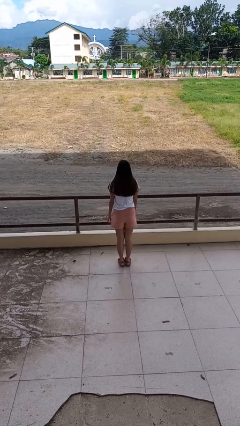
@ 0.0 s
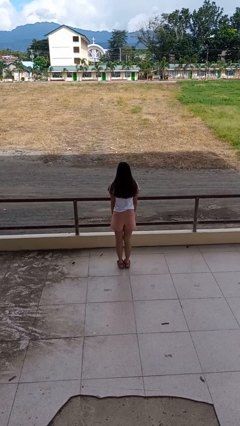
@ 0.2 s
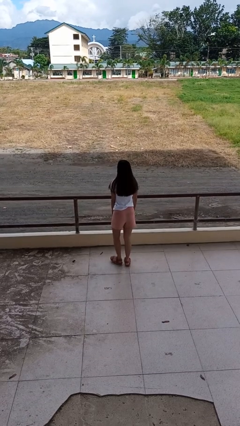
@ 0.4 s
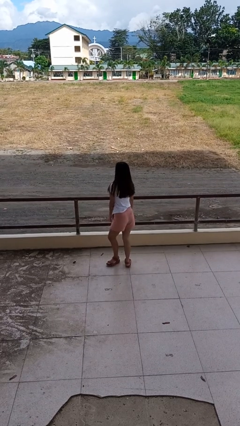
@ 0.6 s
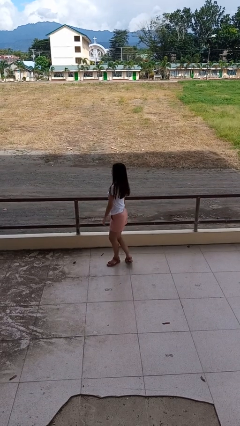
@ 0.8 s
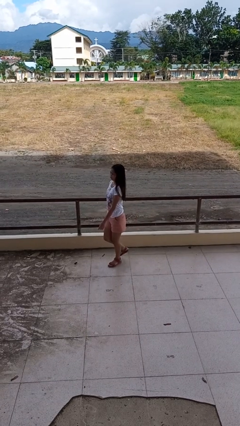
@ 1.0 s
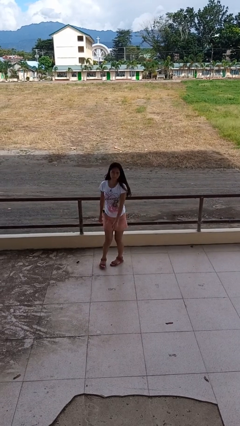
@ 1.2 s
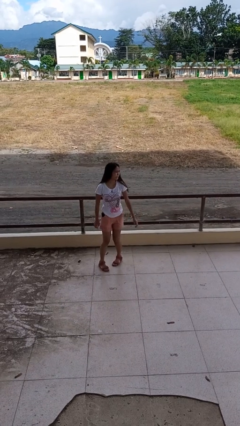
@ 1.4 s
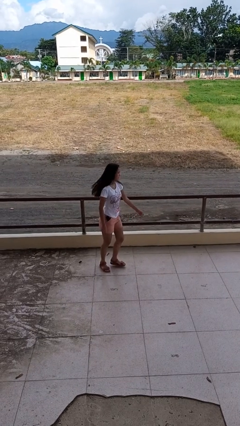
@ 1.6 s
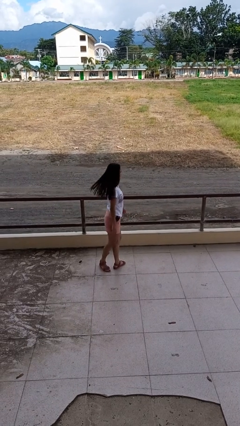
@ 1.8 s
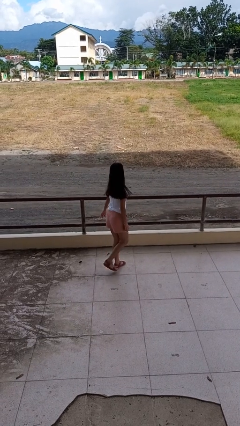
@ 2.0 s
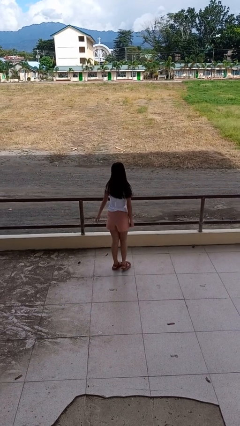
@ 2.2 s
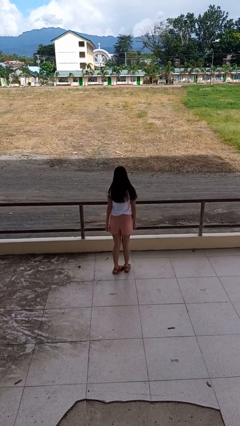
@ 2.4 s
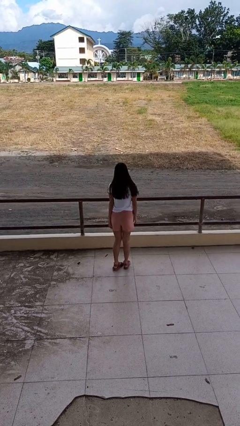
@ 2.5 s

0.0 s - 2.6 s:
person twirls

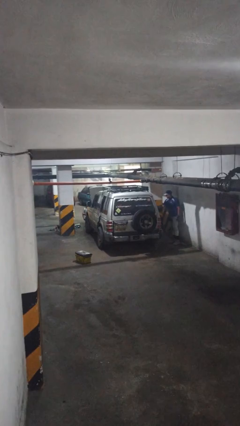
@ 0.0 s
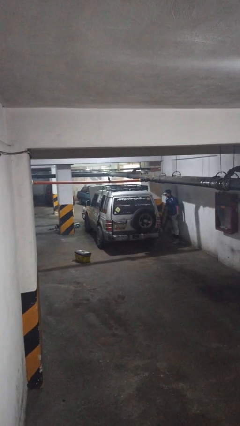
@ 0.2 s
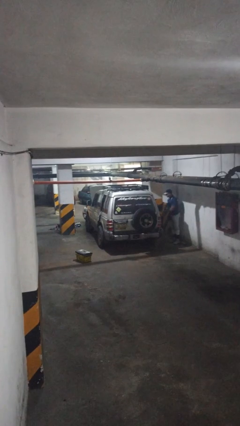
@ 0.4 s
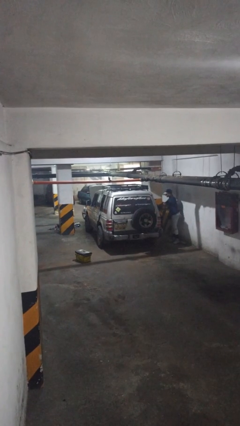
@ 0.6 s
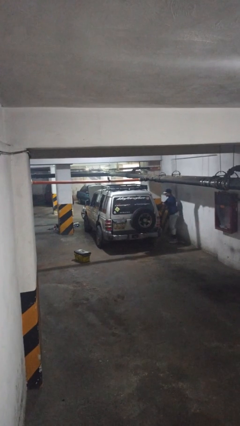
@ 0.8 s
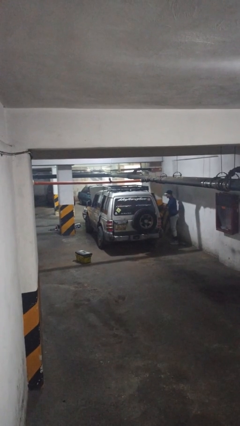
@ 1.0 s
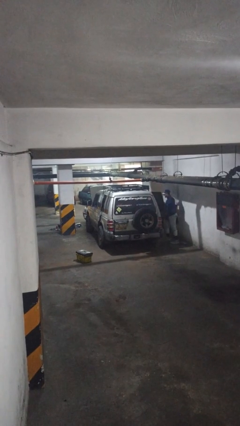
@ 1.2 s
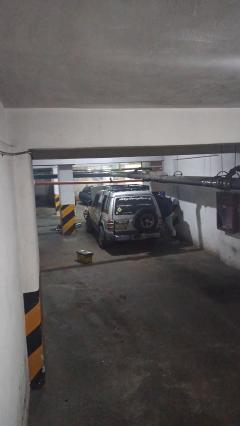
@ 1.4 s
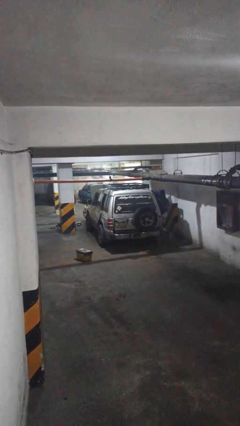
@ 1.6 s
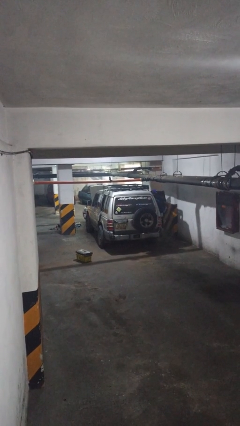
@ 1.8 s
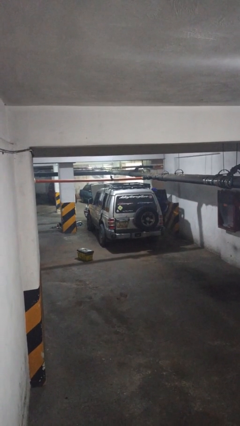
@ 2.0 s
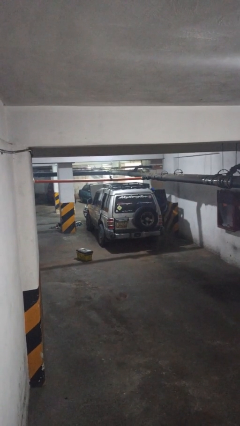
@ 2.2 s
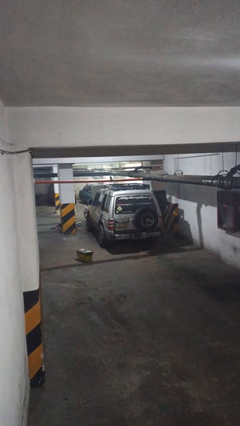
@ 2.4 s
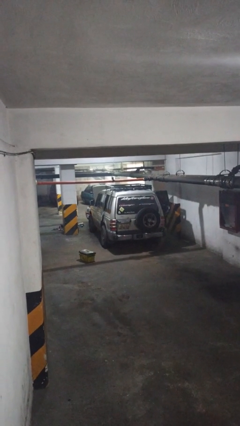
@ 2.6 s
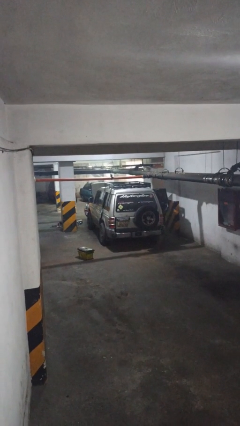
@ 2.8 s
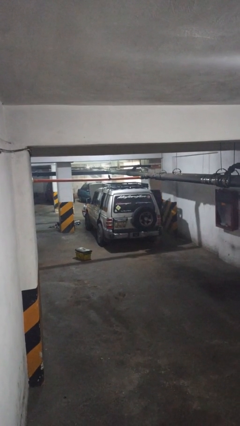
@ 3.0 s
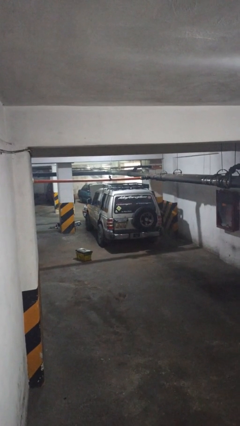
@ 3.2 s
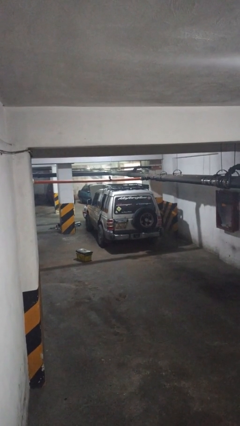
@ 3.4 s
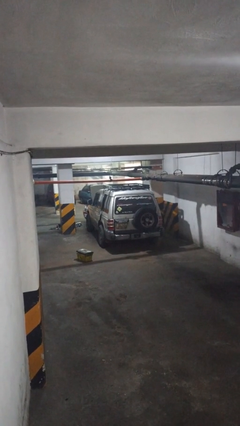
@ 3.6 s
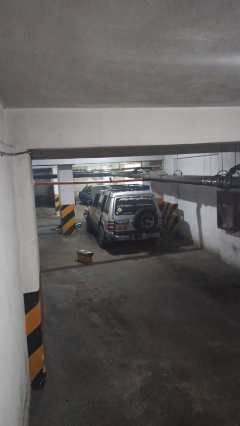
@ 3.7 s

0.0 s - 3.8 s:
car picks up person

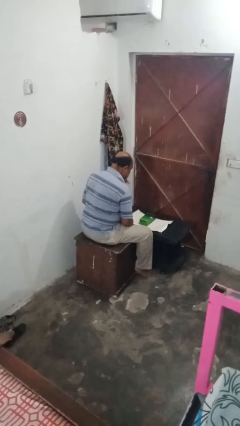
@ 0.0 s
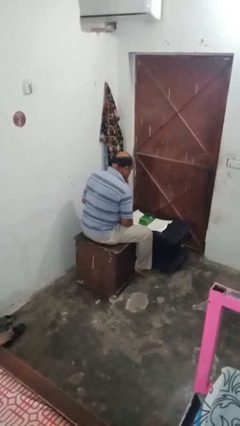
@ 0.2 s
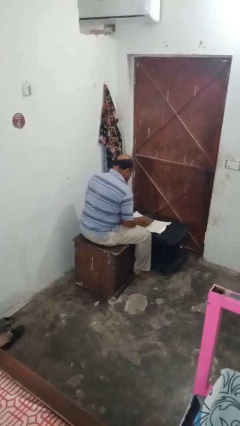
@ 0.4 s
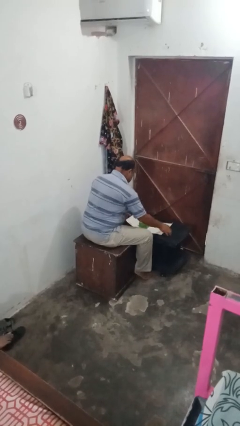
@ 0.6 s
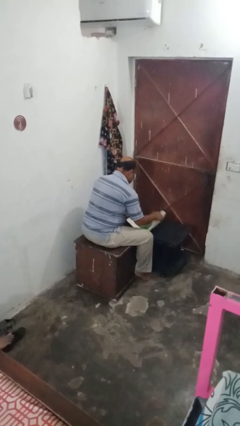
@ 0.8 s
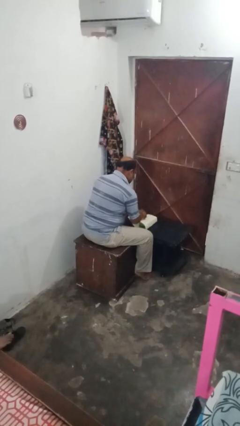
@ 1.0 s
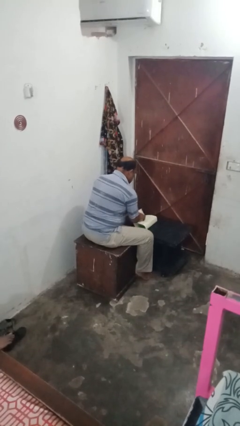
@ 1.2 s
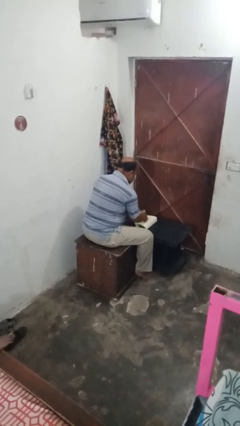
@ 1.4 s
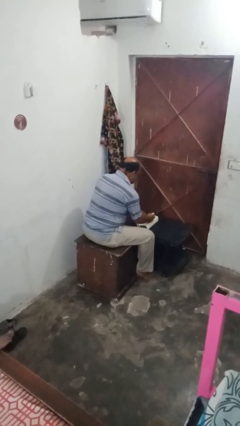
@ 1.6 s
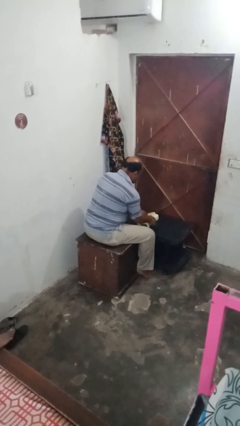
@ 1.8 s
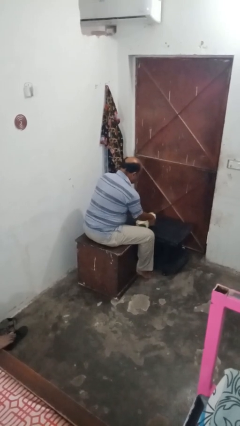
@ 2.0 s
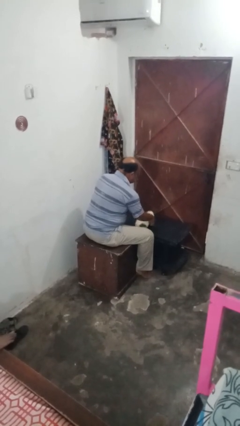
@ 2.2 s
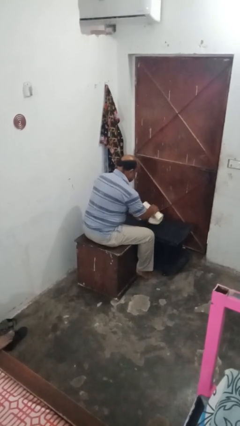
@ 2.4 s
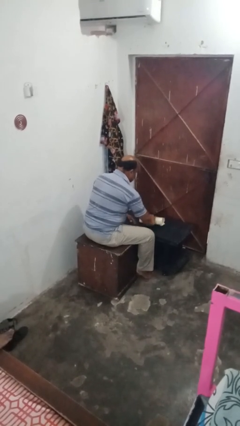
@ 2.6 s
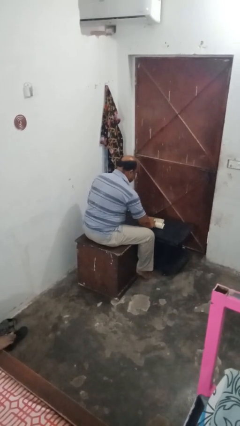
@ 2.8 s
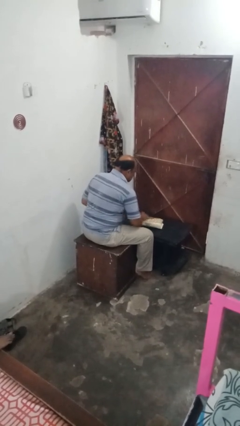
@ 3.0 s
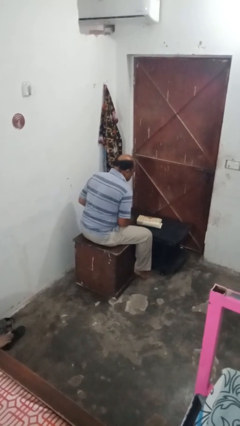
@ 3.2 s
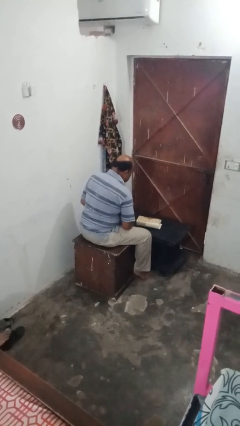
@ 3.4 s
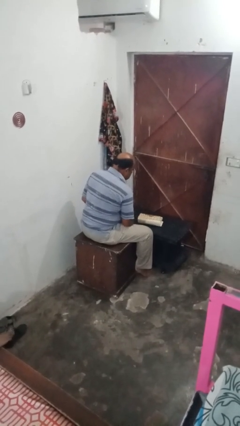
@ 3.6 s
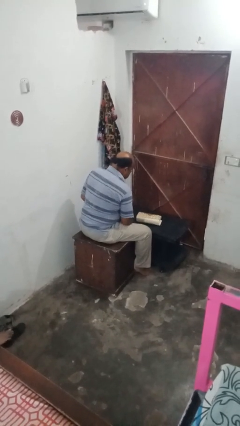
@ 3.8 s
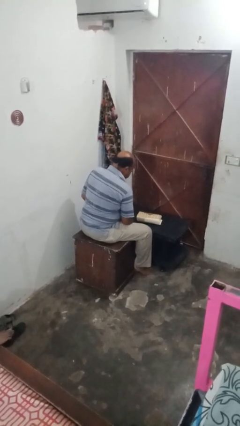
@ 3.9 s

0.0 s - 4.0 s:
person wraps box

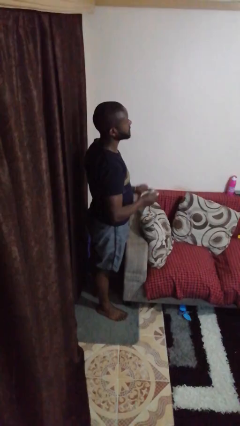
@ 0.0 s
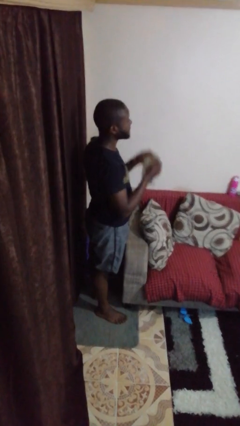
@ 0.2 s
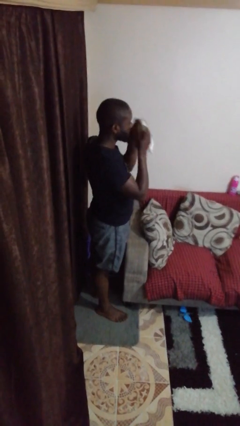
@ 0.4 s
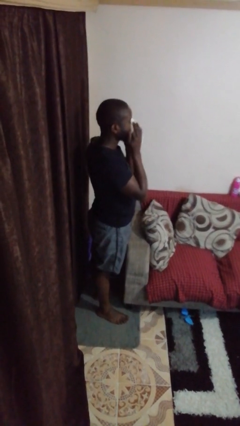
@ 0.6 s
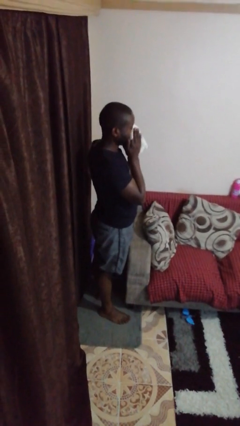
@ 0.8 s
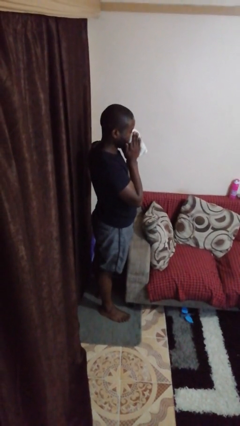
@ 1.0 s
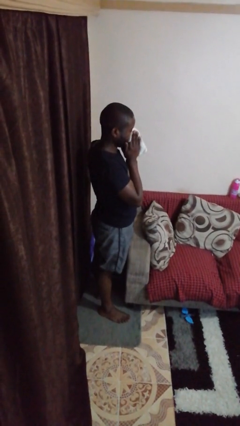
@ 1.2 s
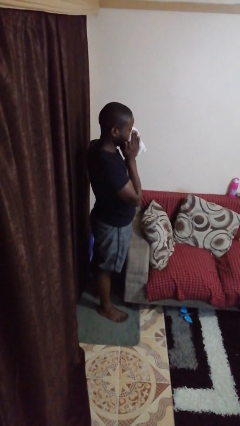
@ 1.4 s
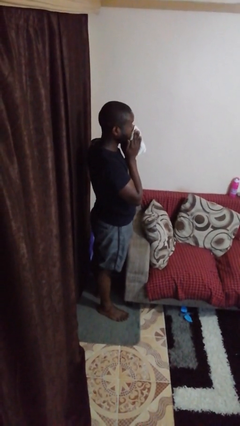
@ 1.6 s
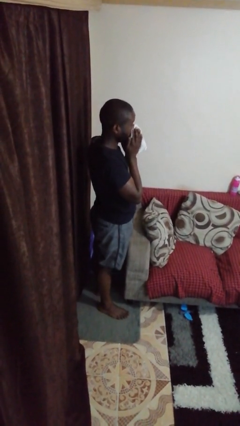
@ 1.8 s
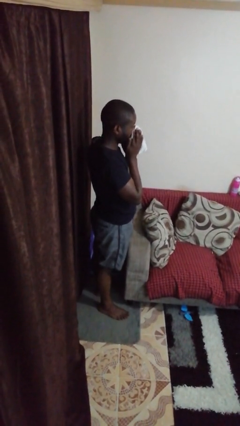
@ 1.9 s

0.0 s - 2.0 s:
person blows nose

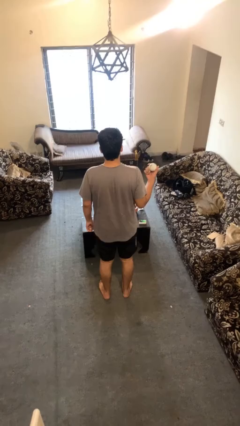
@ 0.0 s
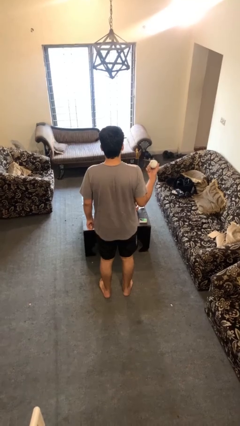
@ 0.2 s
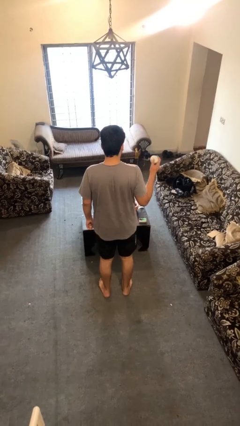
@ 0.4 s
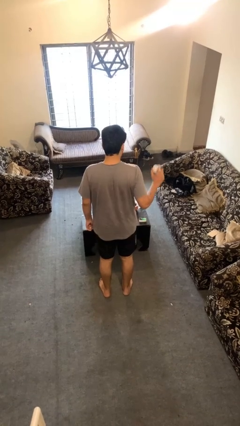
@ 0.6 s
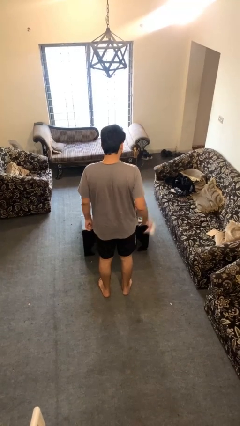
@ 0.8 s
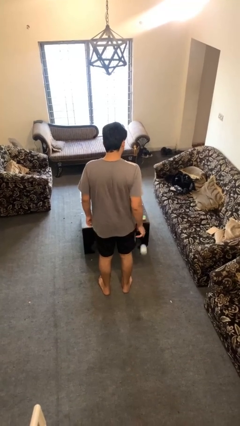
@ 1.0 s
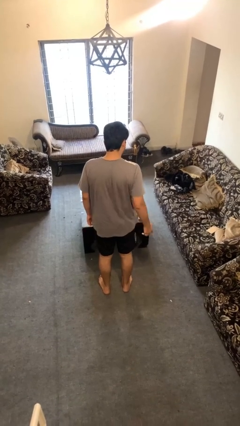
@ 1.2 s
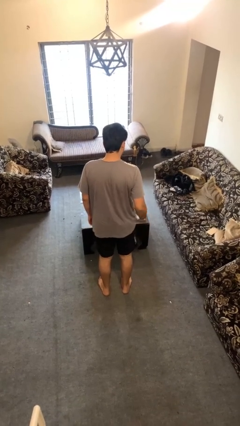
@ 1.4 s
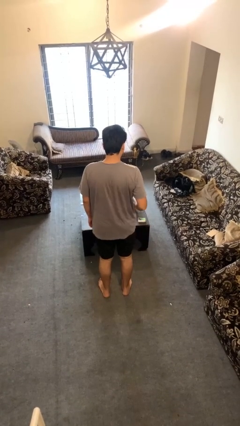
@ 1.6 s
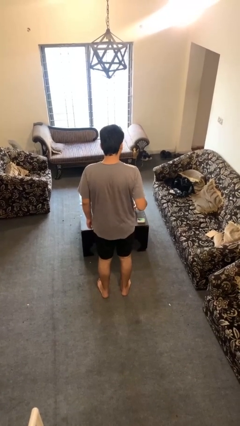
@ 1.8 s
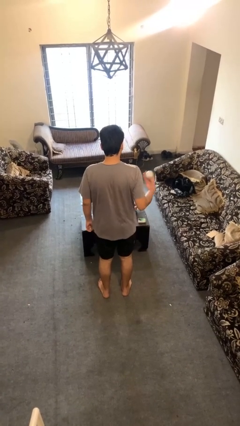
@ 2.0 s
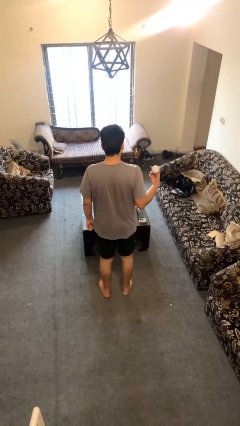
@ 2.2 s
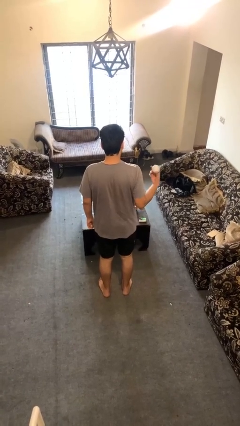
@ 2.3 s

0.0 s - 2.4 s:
person bounces ball on floor

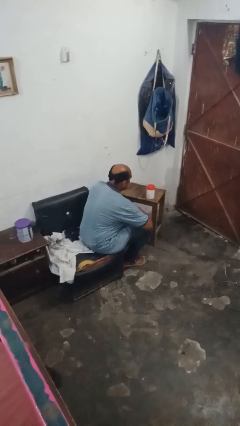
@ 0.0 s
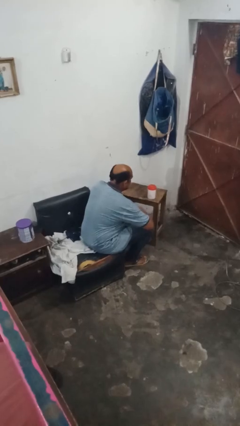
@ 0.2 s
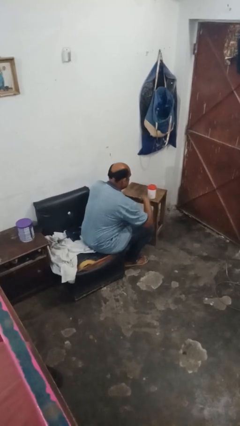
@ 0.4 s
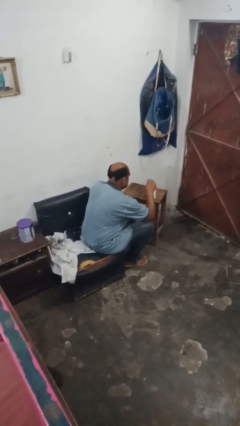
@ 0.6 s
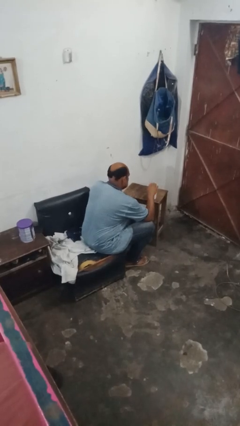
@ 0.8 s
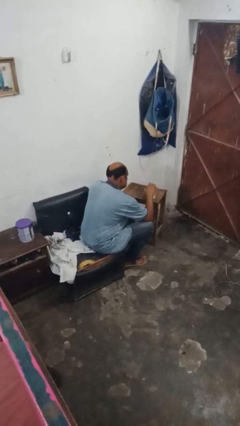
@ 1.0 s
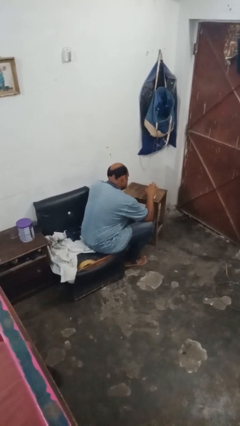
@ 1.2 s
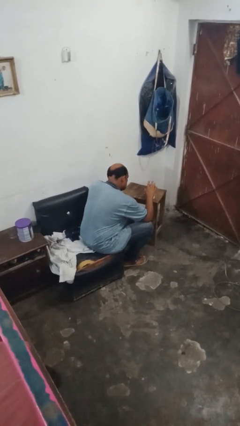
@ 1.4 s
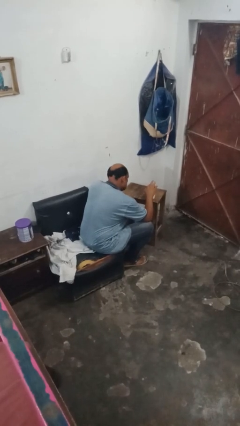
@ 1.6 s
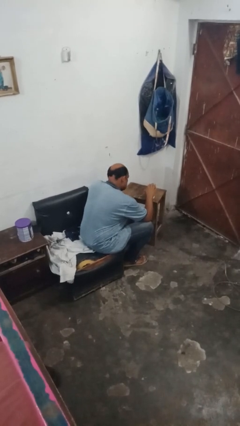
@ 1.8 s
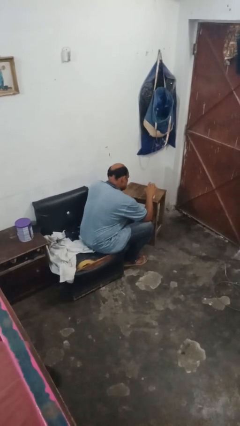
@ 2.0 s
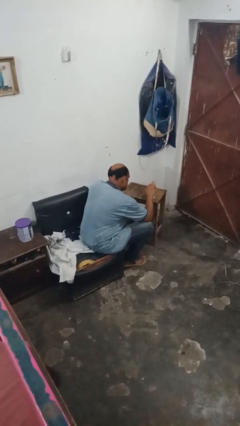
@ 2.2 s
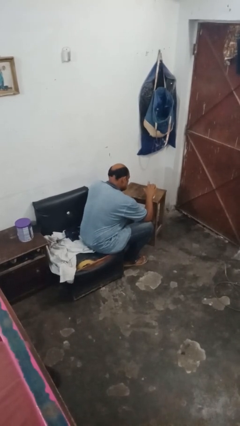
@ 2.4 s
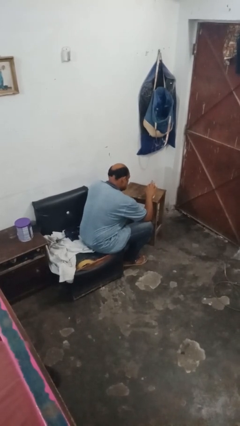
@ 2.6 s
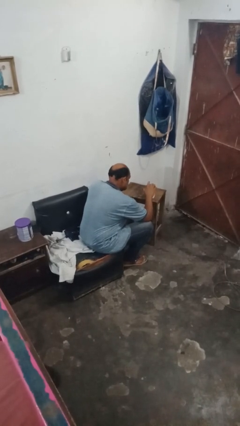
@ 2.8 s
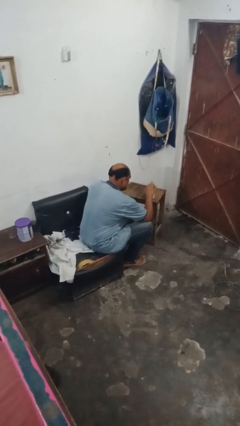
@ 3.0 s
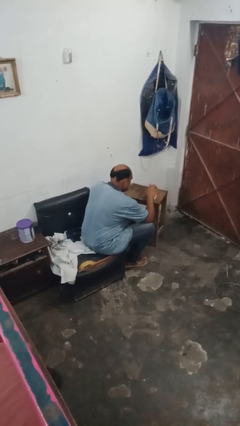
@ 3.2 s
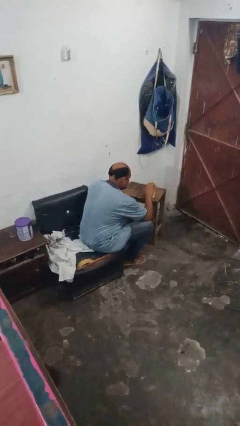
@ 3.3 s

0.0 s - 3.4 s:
person taps object with finger
